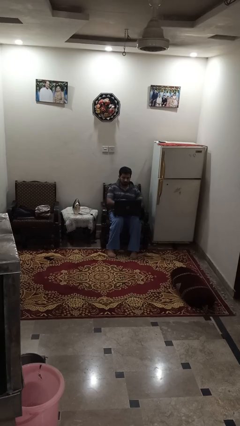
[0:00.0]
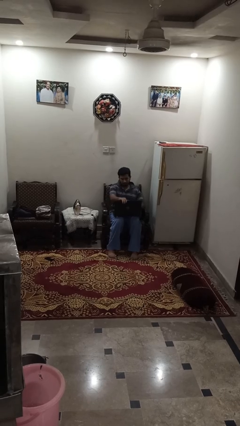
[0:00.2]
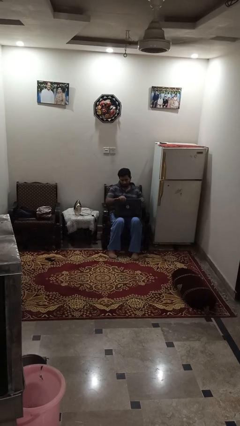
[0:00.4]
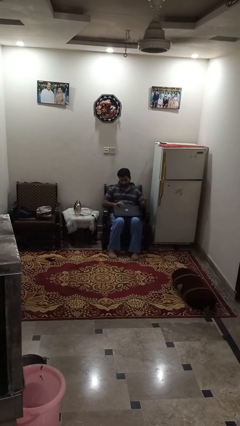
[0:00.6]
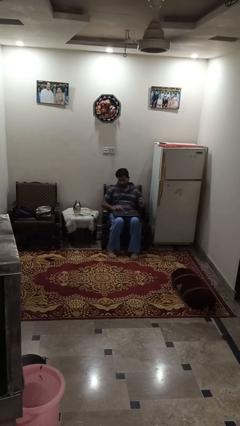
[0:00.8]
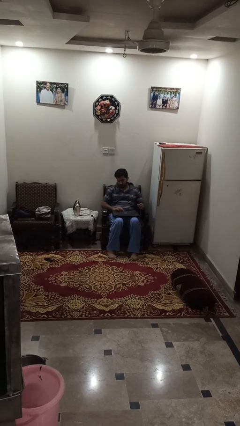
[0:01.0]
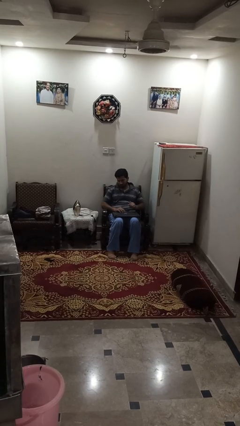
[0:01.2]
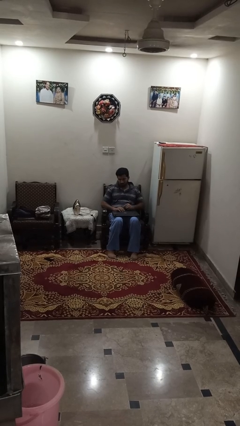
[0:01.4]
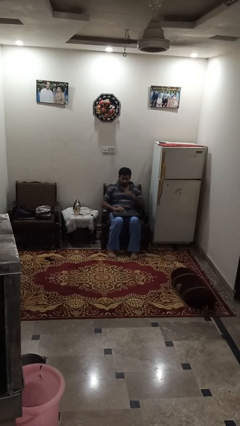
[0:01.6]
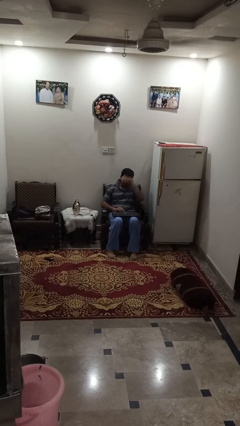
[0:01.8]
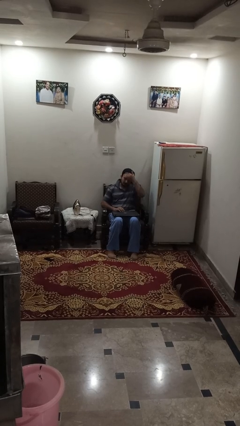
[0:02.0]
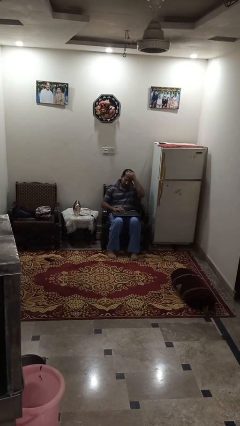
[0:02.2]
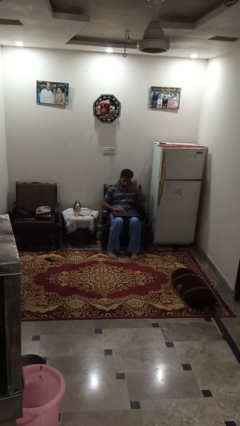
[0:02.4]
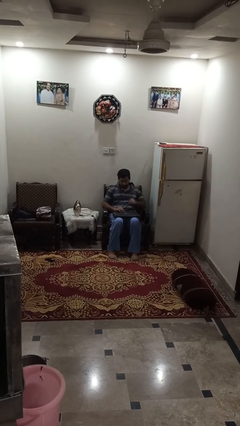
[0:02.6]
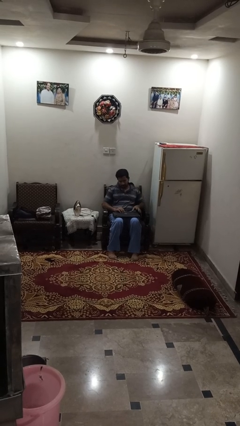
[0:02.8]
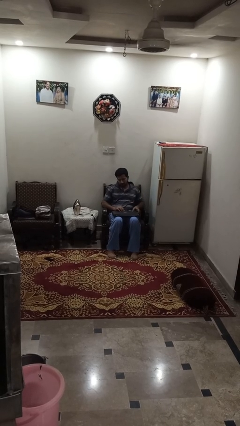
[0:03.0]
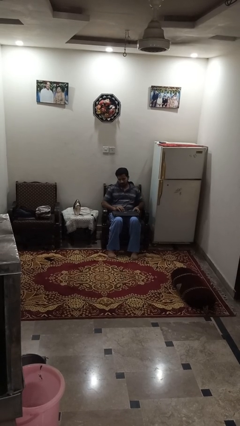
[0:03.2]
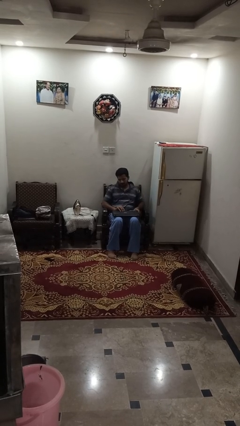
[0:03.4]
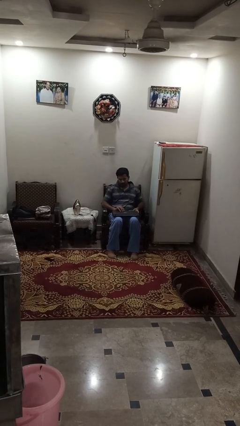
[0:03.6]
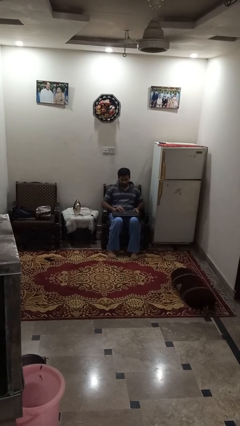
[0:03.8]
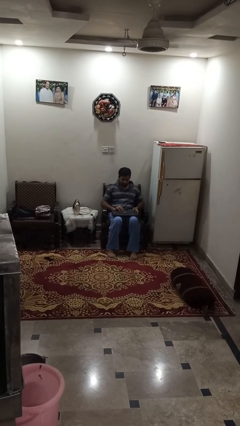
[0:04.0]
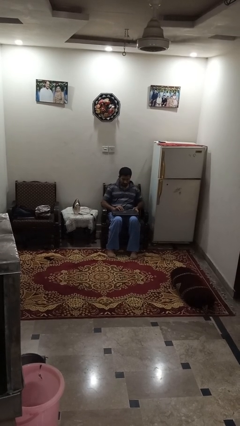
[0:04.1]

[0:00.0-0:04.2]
person closes laptop

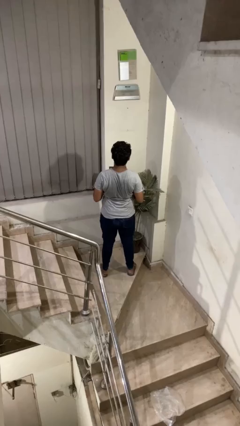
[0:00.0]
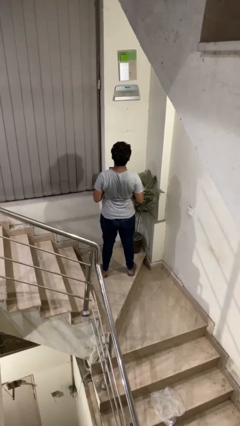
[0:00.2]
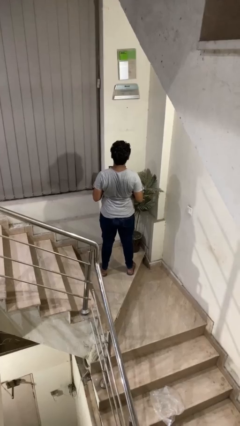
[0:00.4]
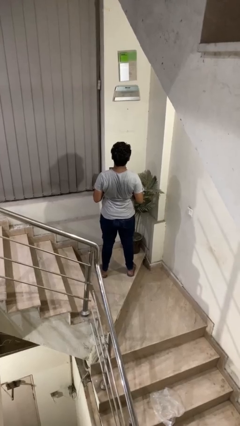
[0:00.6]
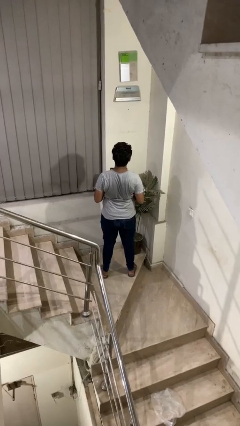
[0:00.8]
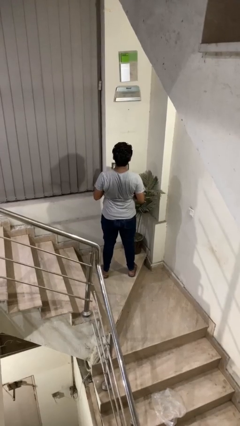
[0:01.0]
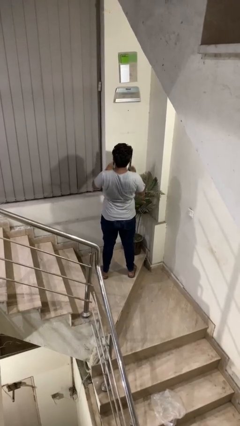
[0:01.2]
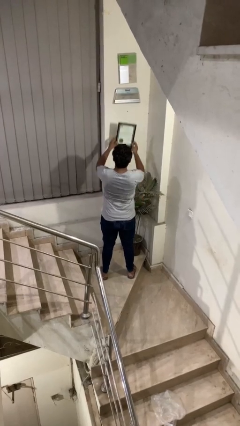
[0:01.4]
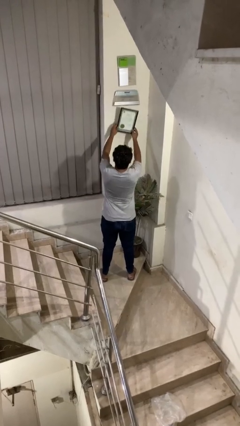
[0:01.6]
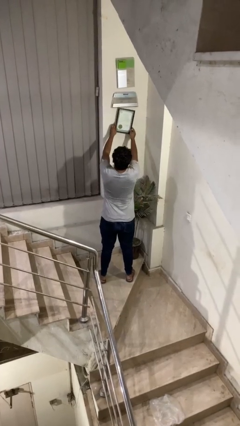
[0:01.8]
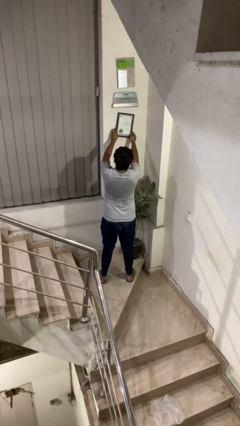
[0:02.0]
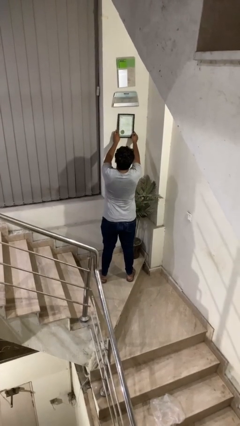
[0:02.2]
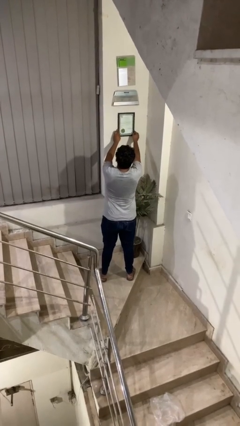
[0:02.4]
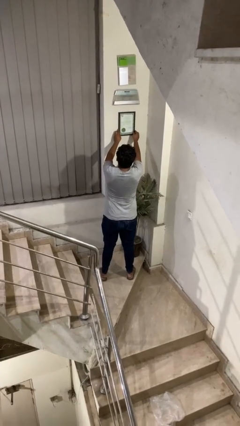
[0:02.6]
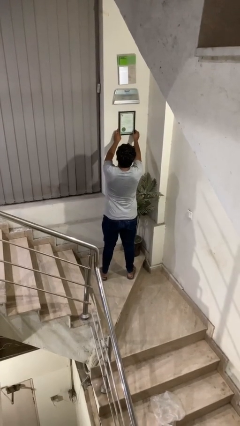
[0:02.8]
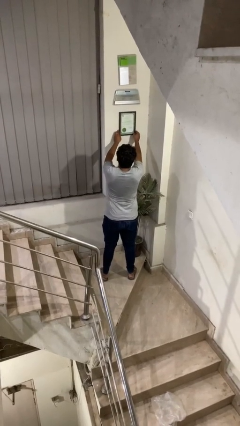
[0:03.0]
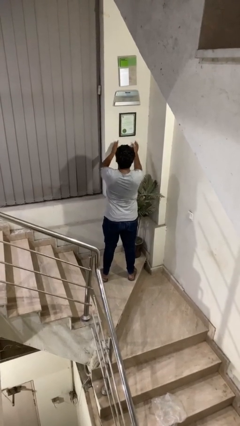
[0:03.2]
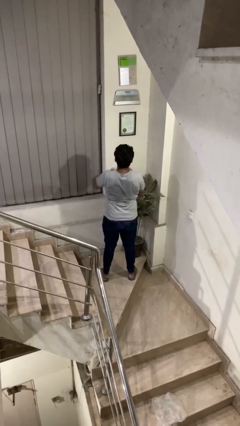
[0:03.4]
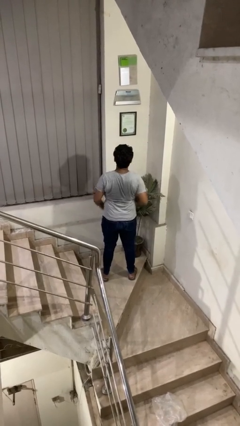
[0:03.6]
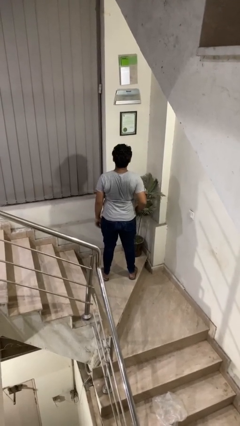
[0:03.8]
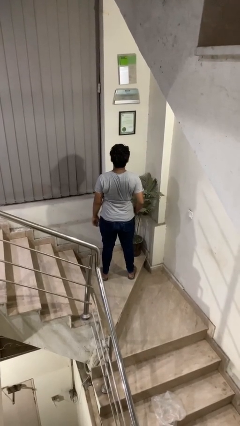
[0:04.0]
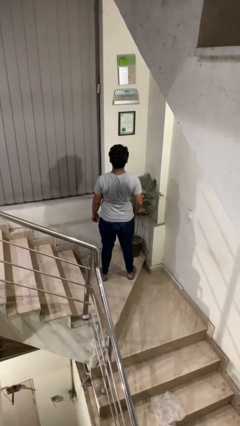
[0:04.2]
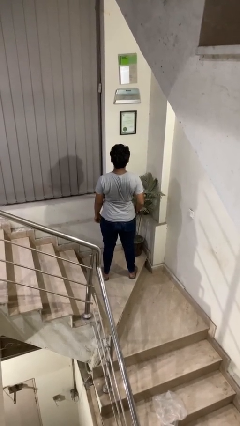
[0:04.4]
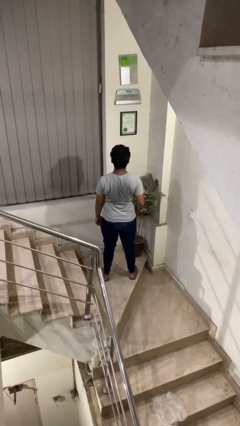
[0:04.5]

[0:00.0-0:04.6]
person puts up picture frame

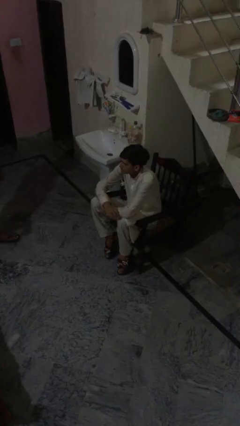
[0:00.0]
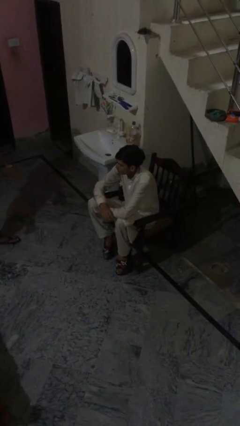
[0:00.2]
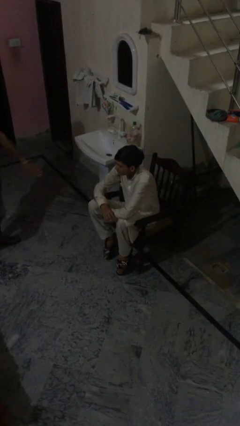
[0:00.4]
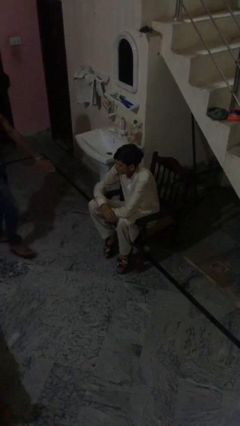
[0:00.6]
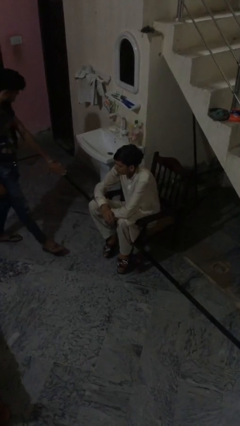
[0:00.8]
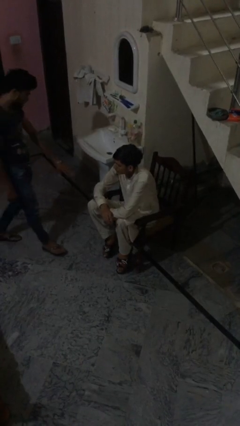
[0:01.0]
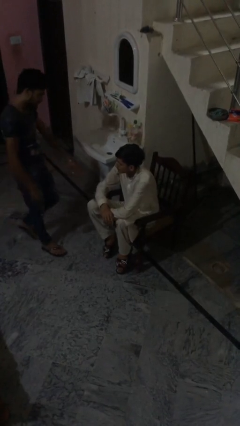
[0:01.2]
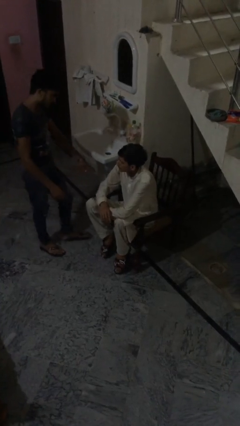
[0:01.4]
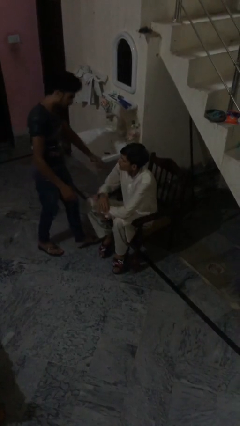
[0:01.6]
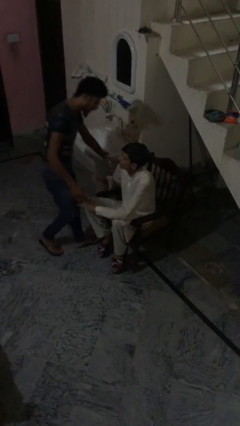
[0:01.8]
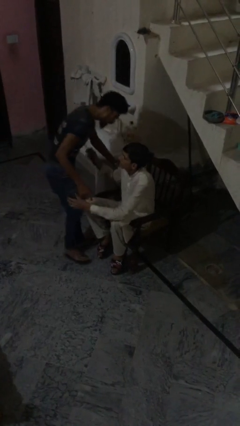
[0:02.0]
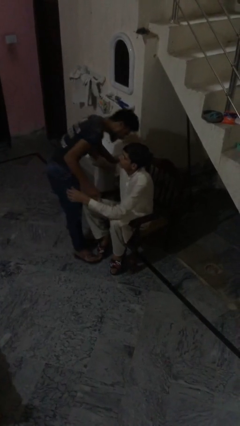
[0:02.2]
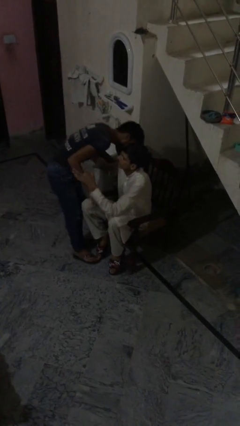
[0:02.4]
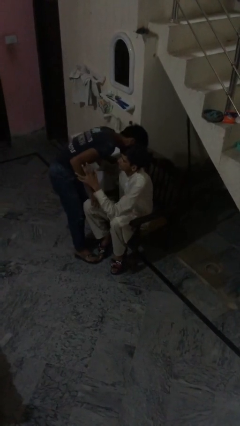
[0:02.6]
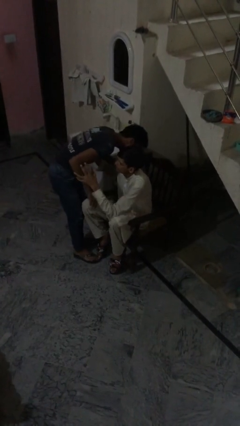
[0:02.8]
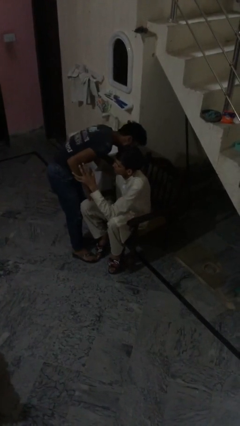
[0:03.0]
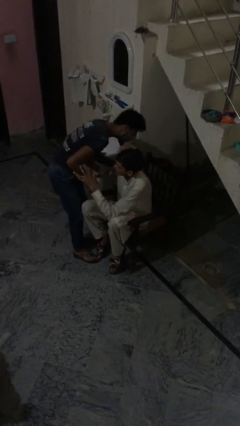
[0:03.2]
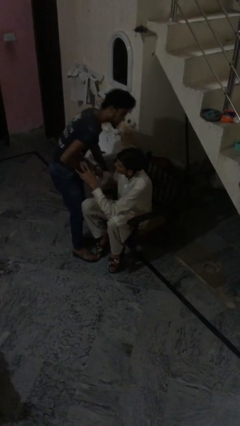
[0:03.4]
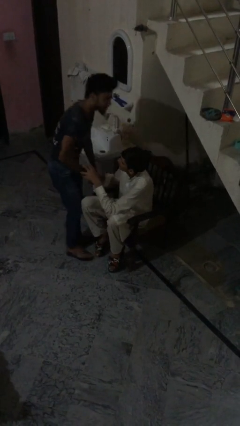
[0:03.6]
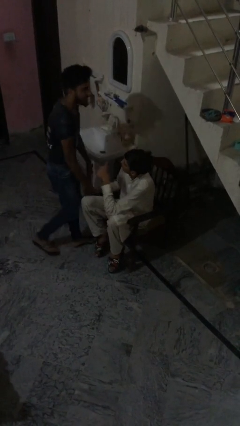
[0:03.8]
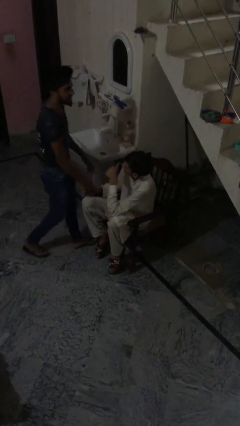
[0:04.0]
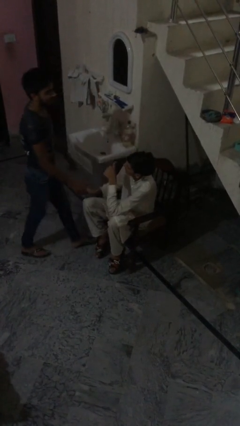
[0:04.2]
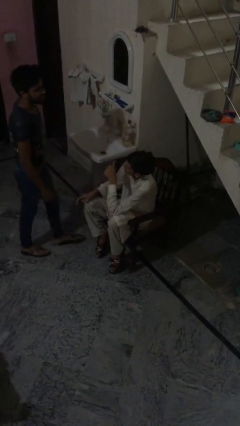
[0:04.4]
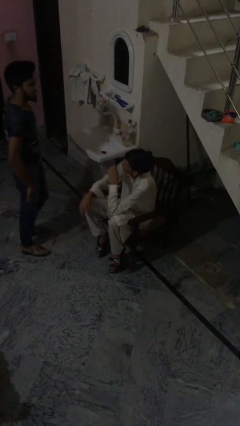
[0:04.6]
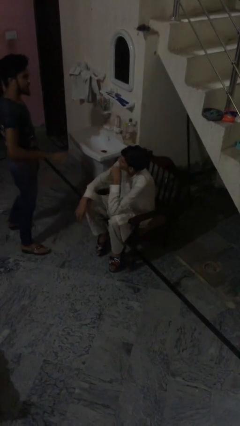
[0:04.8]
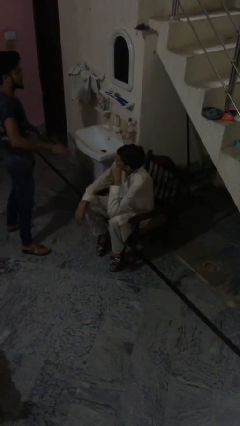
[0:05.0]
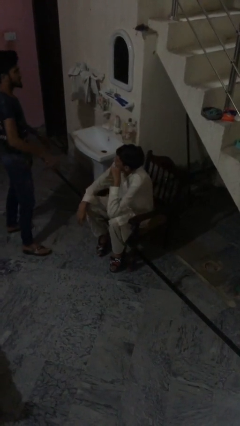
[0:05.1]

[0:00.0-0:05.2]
person embraces person

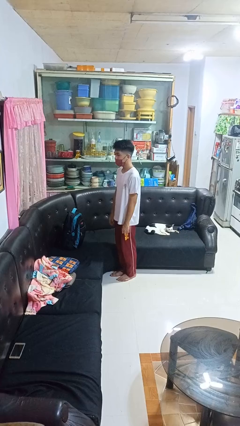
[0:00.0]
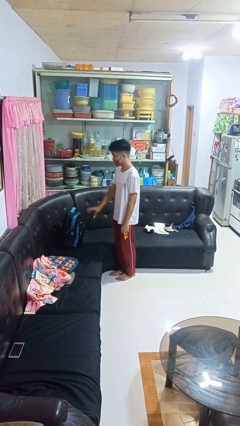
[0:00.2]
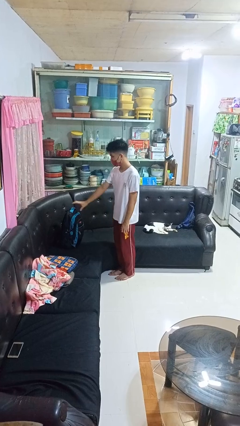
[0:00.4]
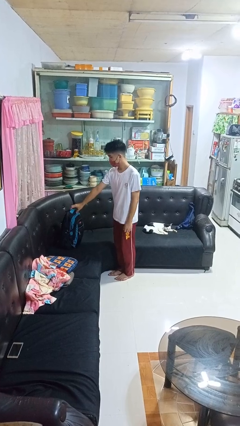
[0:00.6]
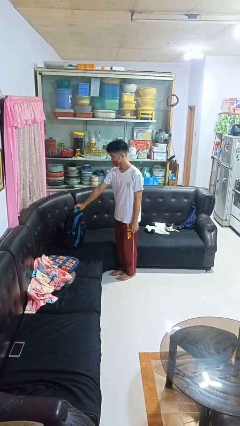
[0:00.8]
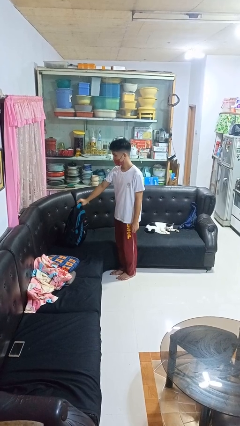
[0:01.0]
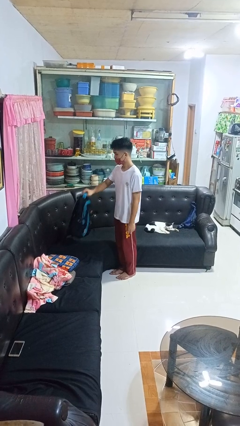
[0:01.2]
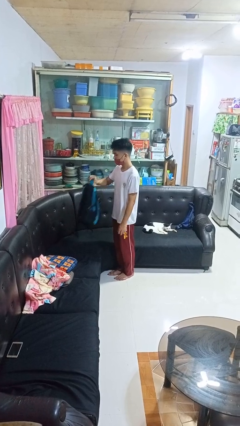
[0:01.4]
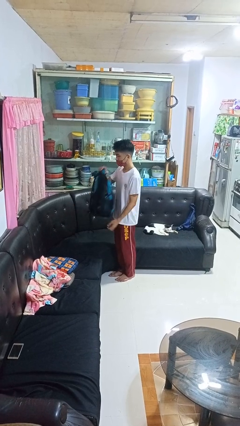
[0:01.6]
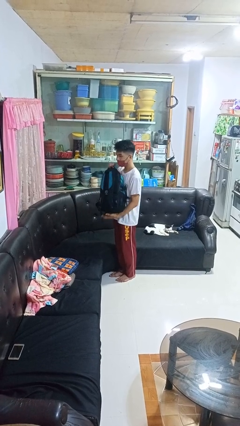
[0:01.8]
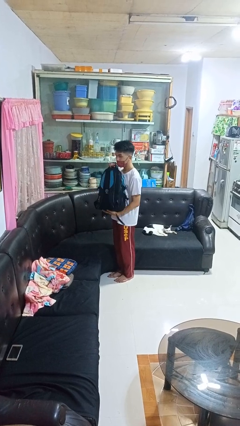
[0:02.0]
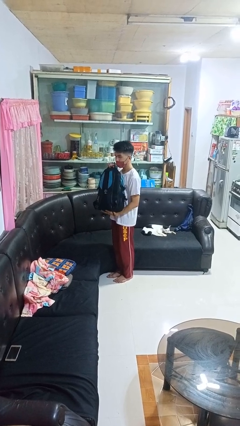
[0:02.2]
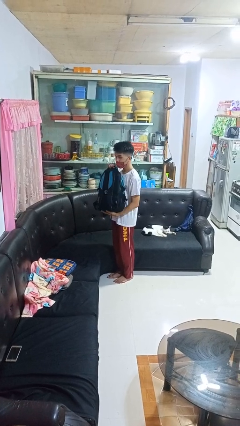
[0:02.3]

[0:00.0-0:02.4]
person picks up object from couch

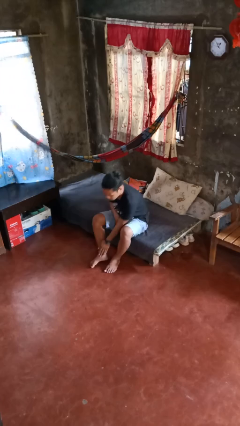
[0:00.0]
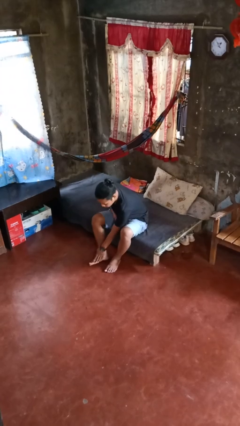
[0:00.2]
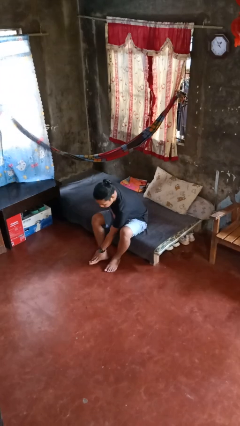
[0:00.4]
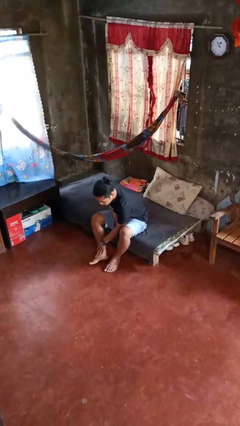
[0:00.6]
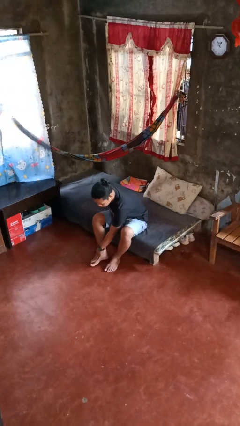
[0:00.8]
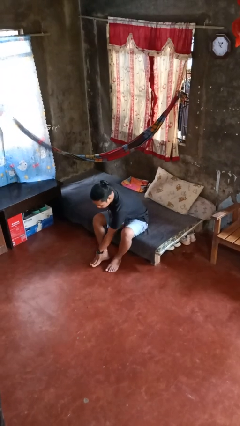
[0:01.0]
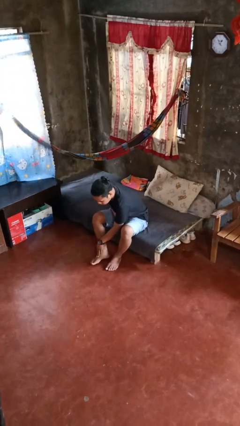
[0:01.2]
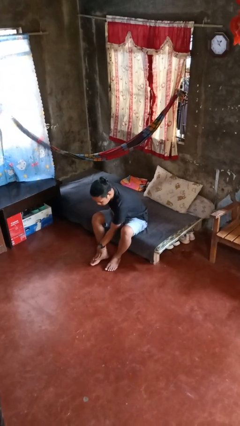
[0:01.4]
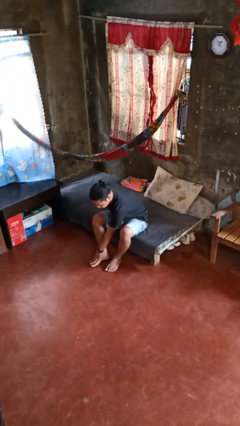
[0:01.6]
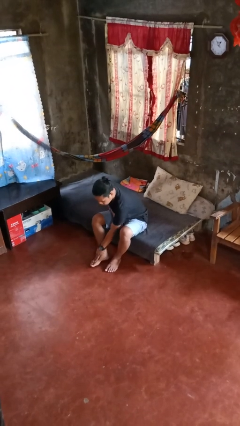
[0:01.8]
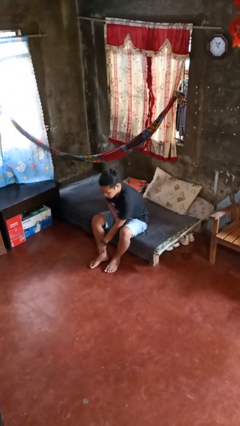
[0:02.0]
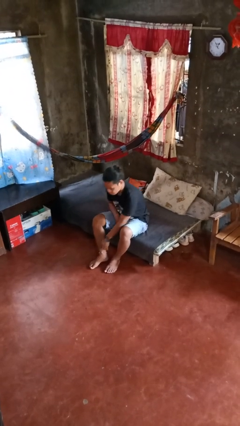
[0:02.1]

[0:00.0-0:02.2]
person rubs foot
